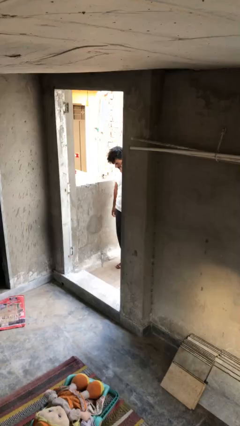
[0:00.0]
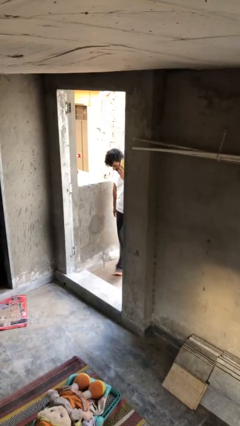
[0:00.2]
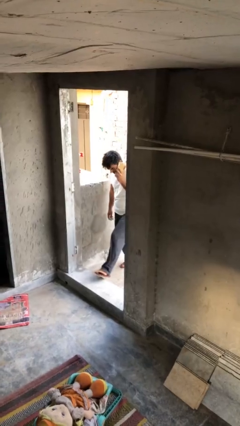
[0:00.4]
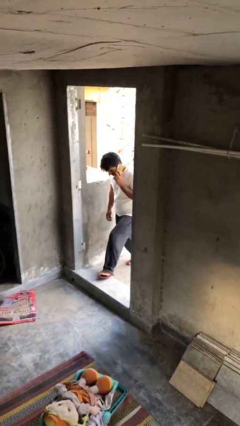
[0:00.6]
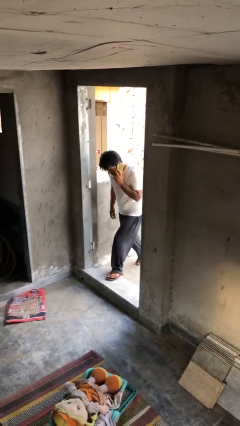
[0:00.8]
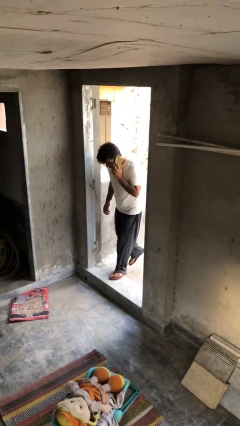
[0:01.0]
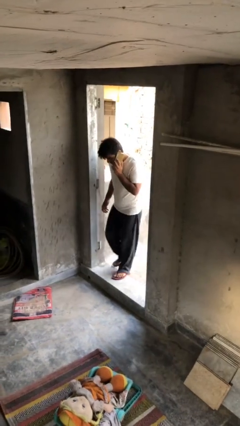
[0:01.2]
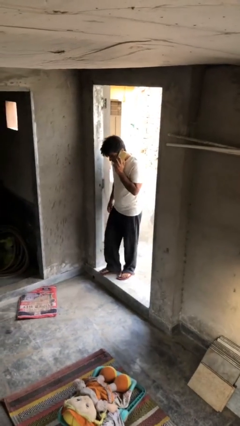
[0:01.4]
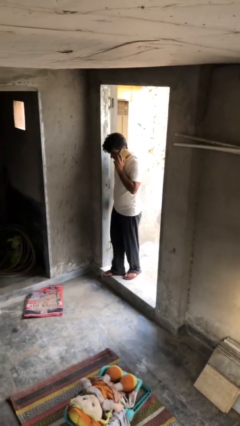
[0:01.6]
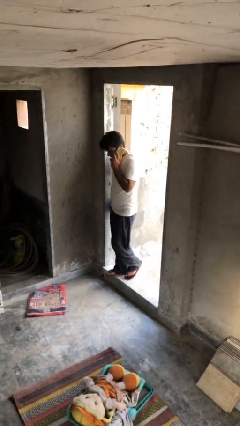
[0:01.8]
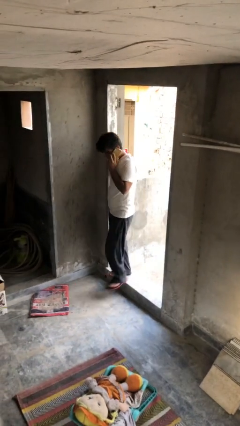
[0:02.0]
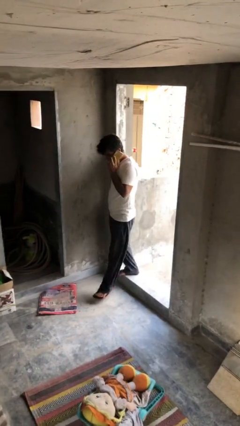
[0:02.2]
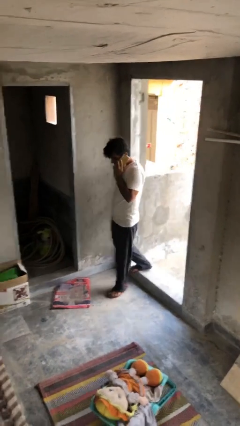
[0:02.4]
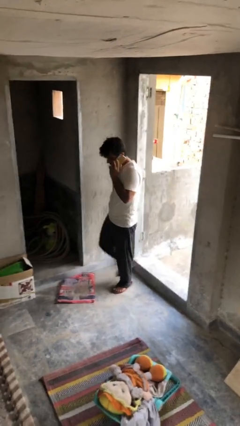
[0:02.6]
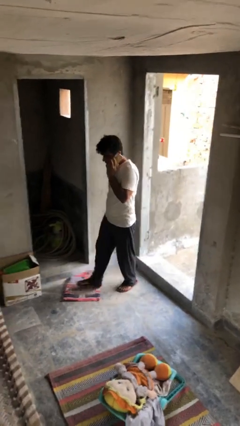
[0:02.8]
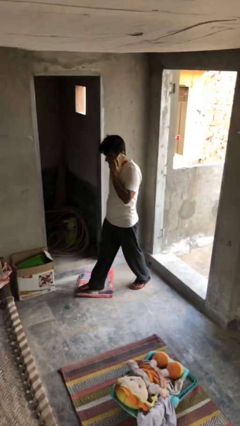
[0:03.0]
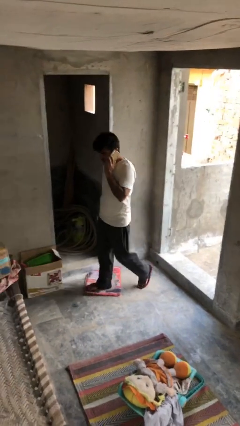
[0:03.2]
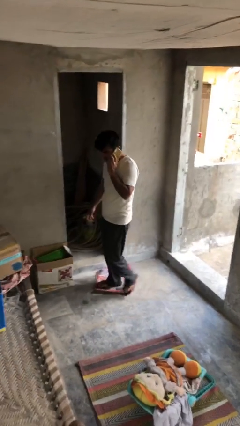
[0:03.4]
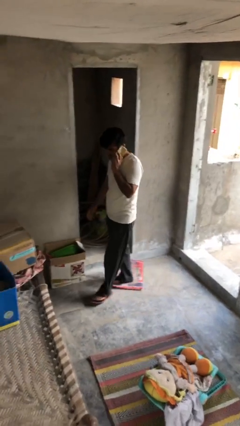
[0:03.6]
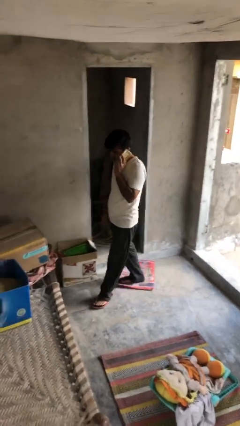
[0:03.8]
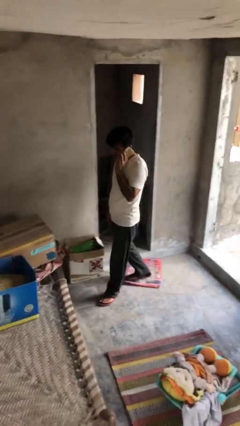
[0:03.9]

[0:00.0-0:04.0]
person enters scene through structure

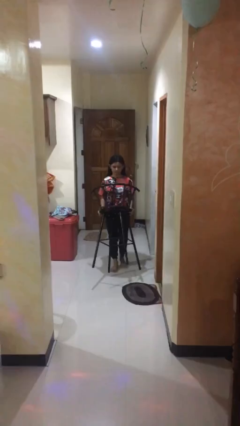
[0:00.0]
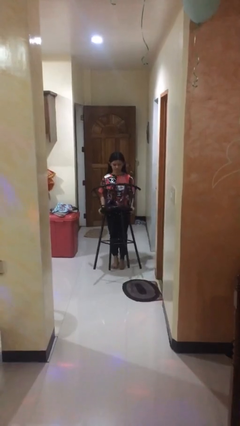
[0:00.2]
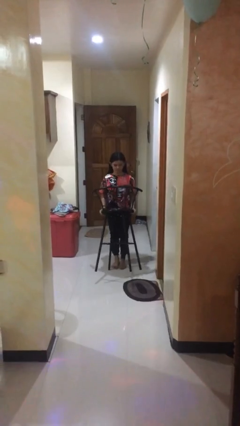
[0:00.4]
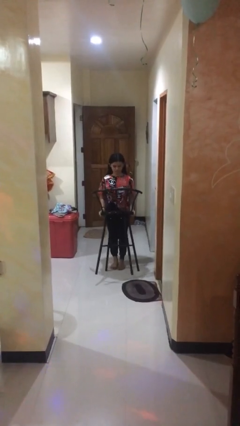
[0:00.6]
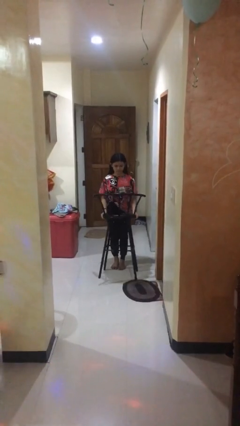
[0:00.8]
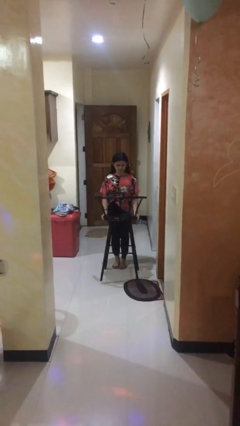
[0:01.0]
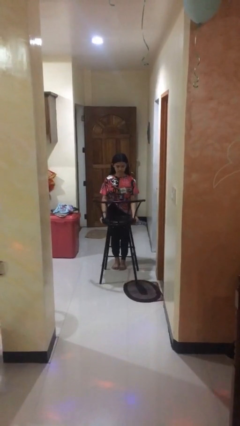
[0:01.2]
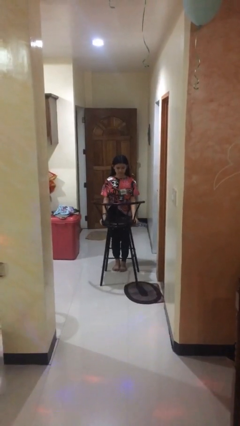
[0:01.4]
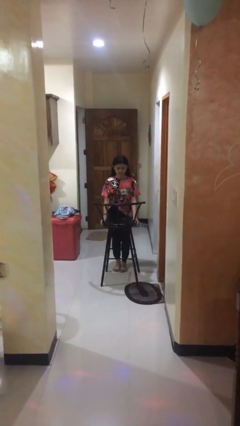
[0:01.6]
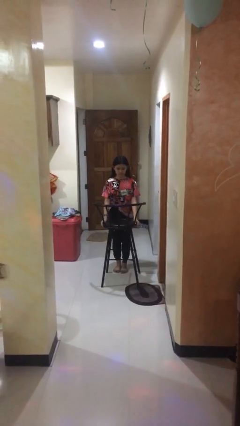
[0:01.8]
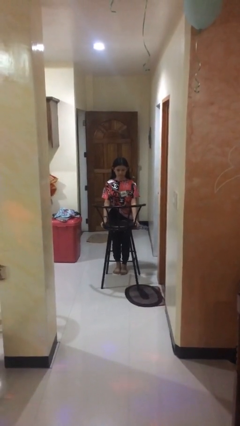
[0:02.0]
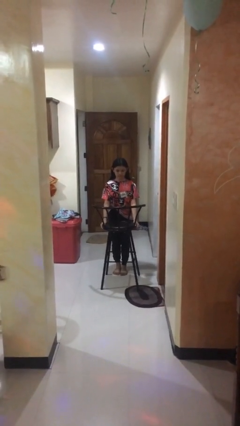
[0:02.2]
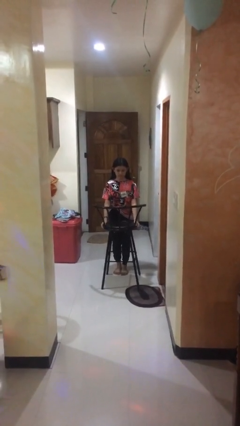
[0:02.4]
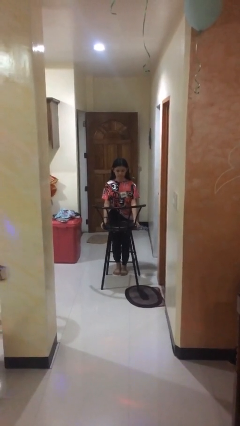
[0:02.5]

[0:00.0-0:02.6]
person puts down object on floor

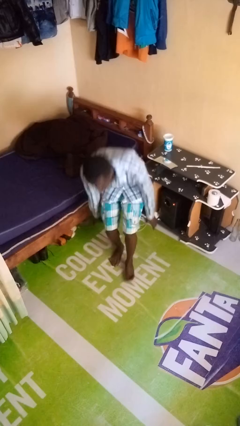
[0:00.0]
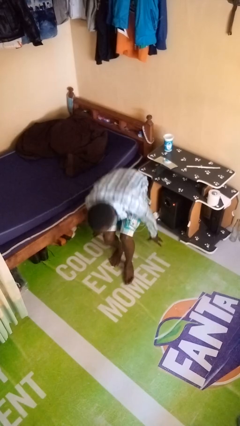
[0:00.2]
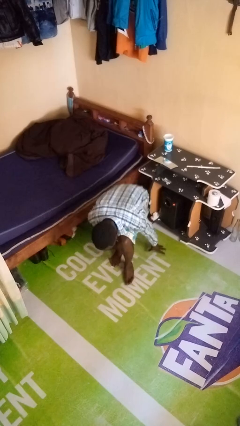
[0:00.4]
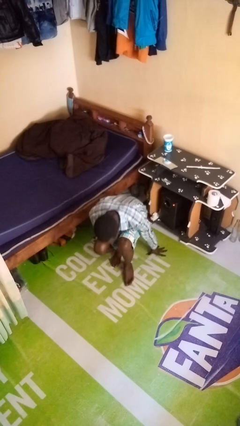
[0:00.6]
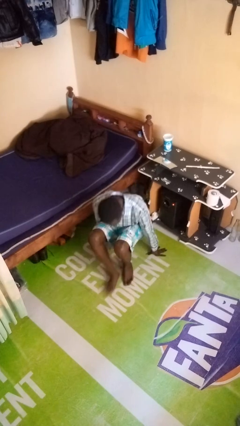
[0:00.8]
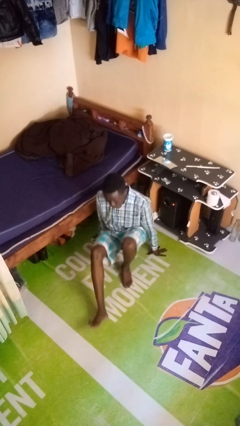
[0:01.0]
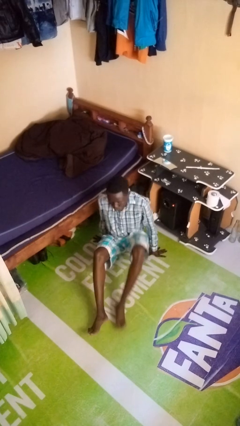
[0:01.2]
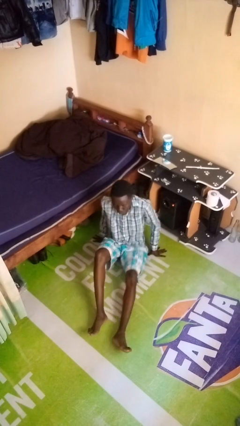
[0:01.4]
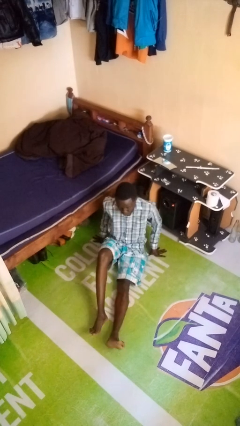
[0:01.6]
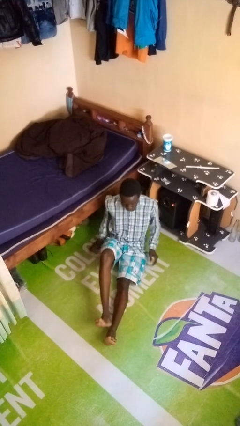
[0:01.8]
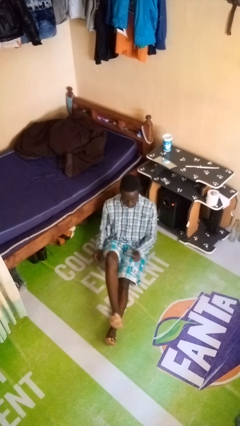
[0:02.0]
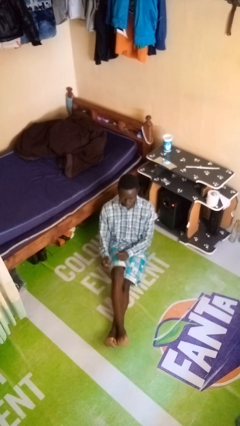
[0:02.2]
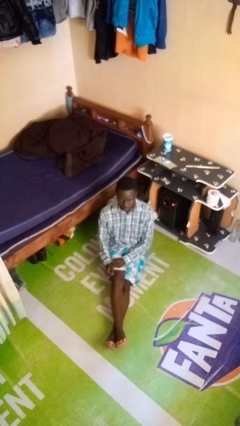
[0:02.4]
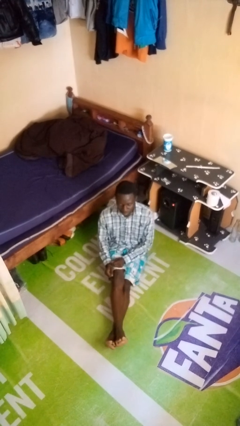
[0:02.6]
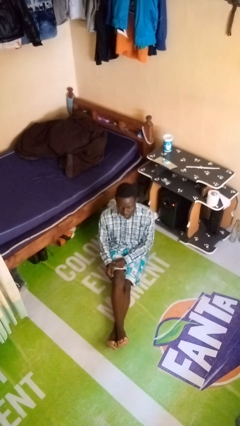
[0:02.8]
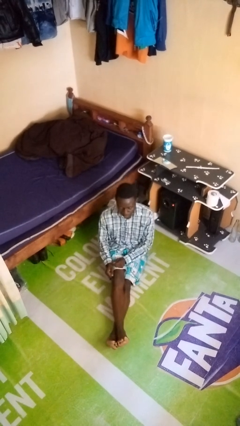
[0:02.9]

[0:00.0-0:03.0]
person sits crisscross

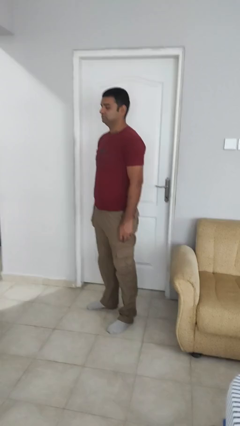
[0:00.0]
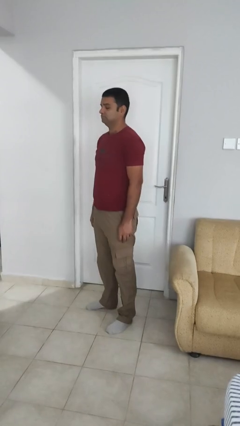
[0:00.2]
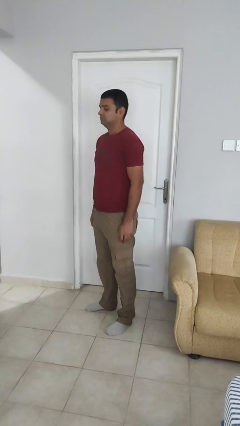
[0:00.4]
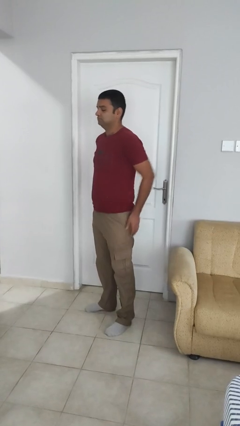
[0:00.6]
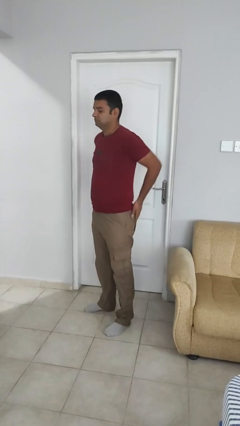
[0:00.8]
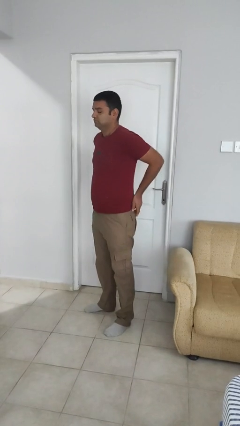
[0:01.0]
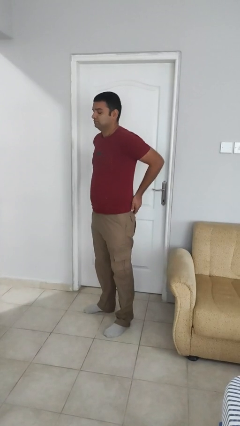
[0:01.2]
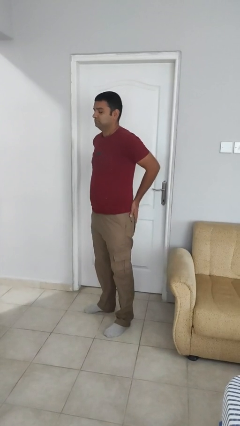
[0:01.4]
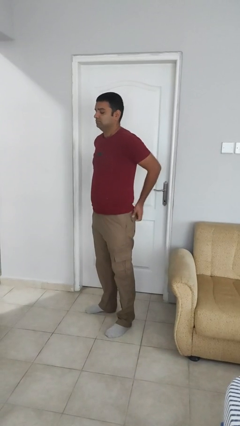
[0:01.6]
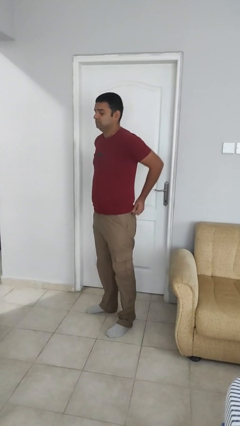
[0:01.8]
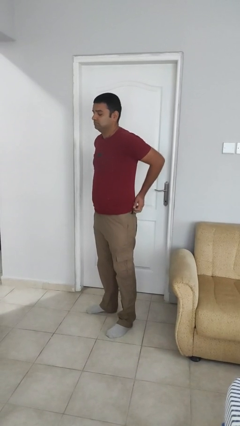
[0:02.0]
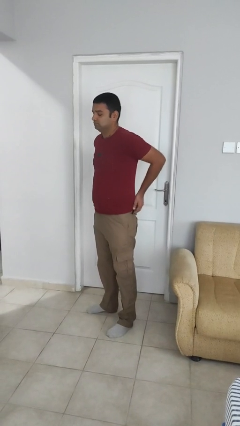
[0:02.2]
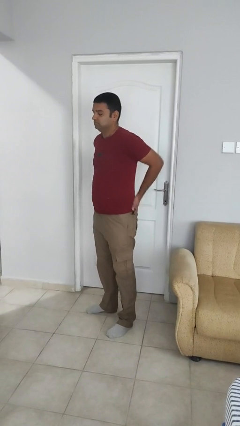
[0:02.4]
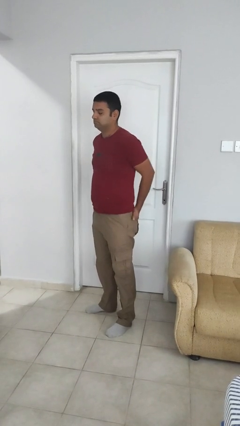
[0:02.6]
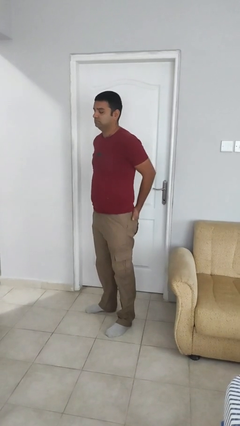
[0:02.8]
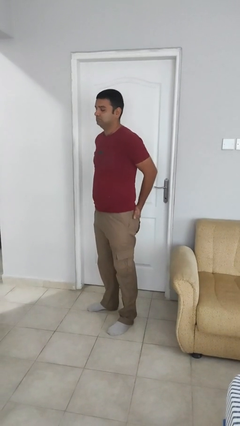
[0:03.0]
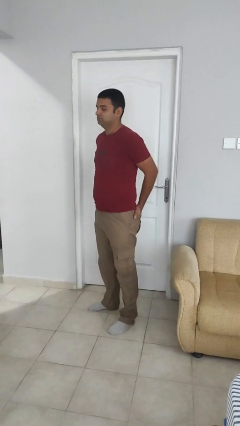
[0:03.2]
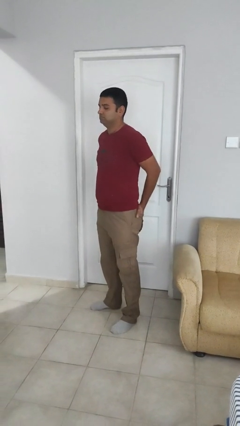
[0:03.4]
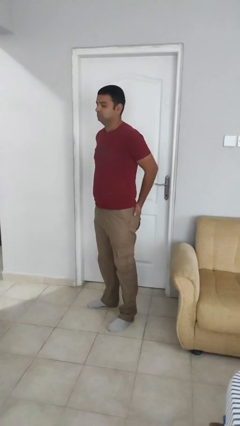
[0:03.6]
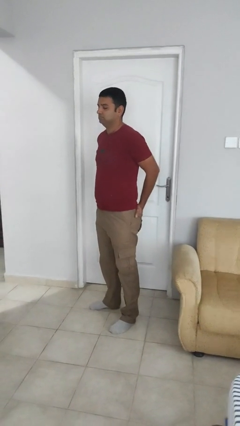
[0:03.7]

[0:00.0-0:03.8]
person puts hands in back pockets

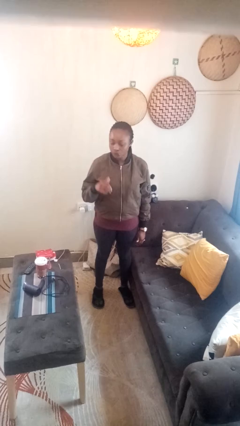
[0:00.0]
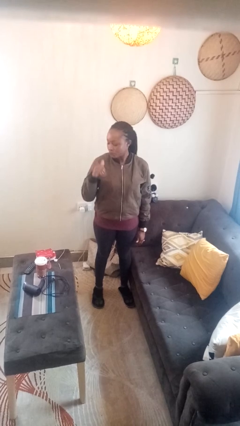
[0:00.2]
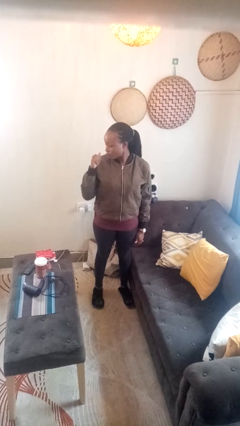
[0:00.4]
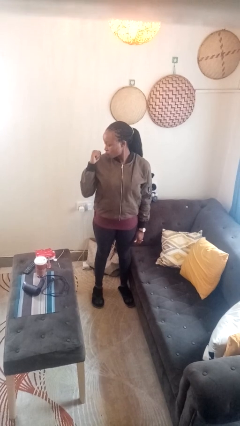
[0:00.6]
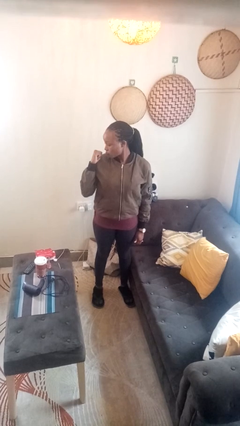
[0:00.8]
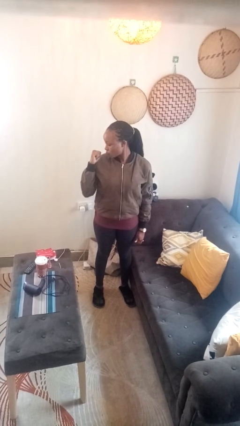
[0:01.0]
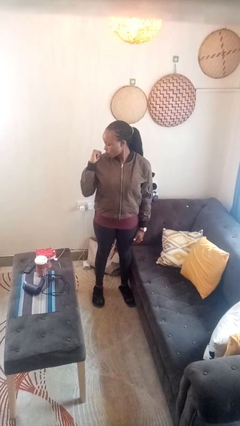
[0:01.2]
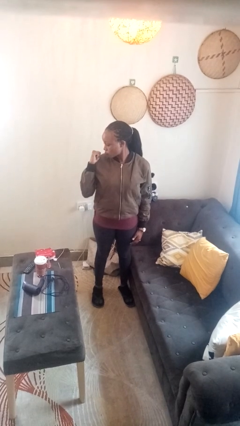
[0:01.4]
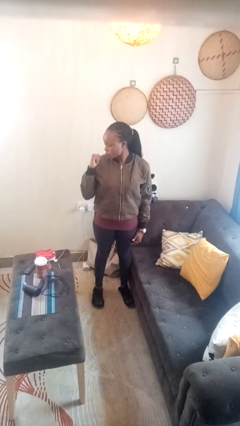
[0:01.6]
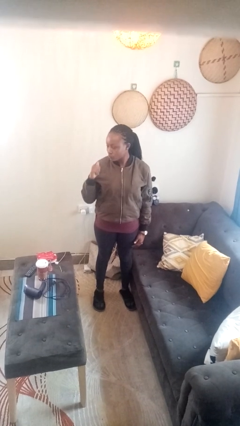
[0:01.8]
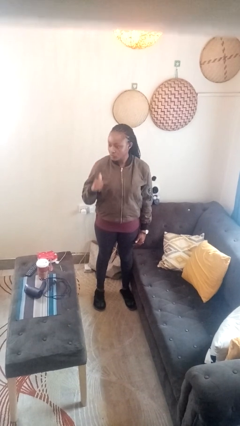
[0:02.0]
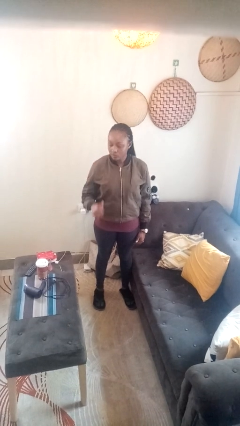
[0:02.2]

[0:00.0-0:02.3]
person gestures behind me

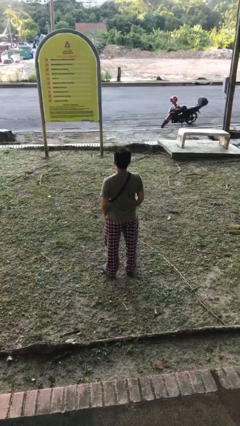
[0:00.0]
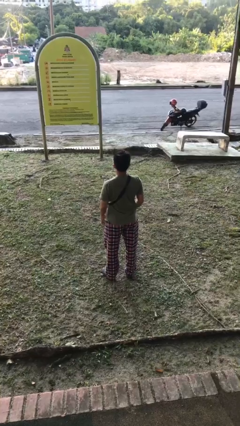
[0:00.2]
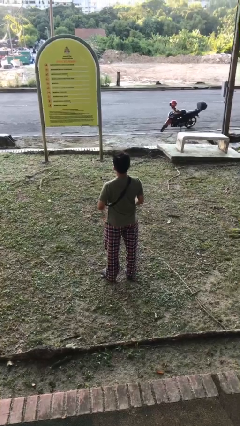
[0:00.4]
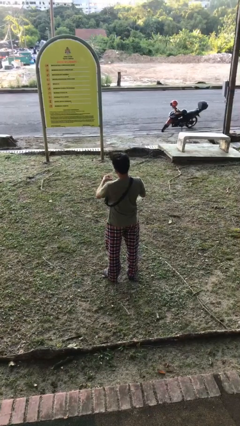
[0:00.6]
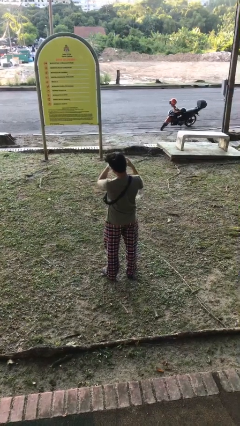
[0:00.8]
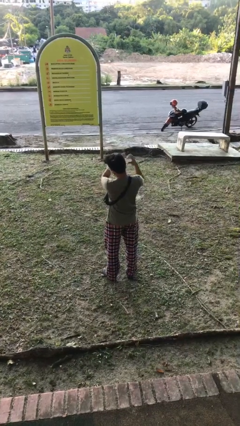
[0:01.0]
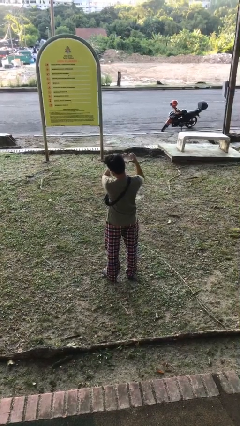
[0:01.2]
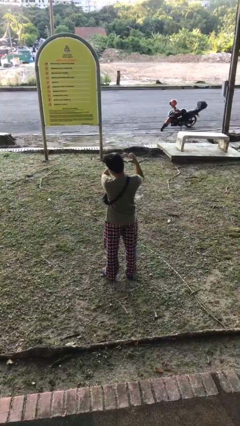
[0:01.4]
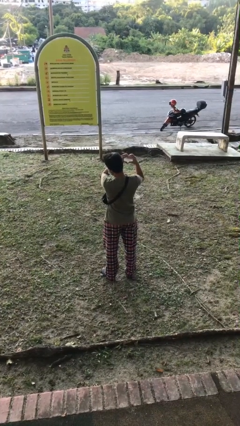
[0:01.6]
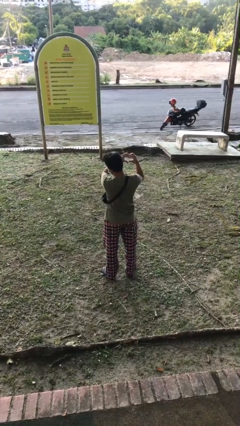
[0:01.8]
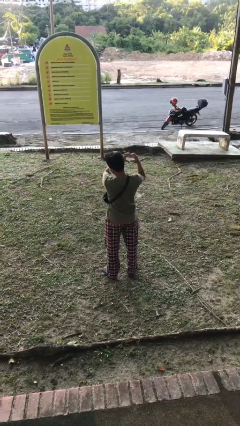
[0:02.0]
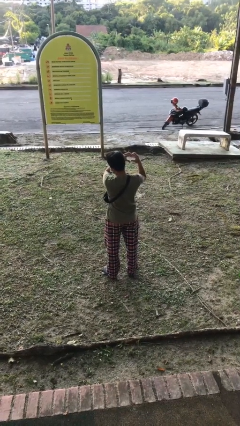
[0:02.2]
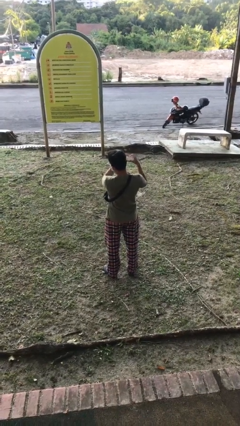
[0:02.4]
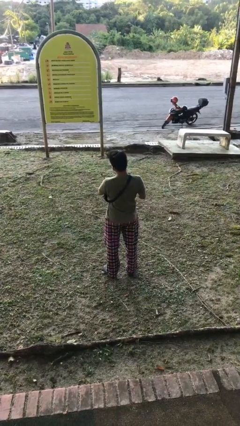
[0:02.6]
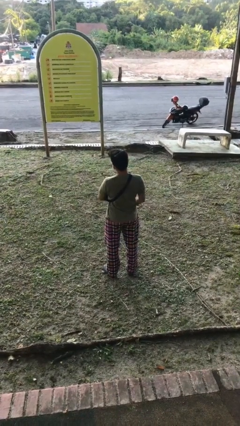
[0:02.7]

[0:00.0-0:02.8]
person gestures heart
